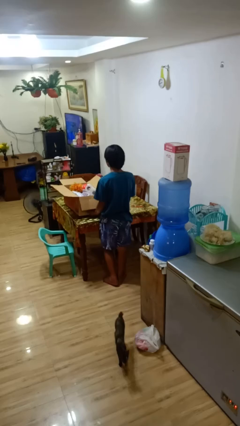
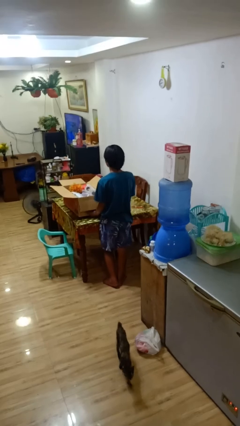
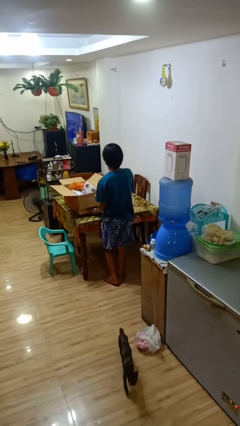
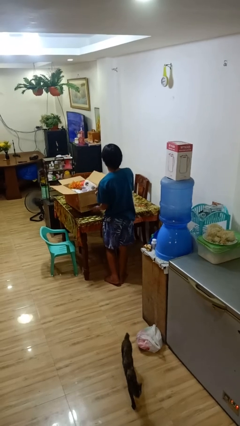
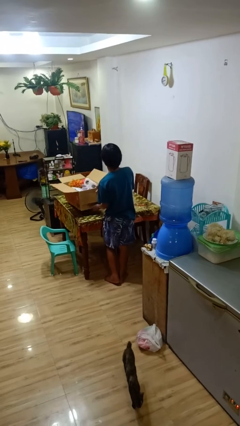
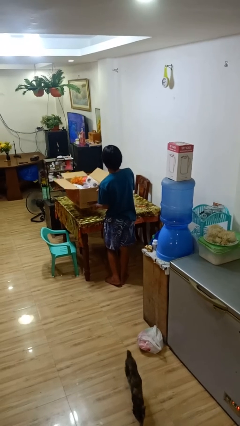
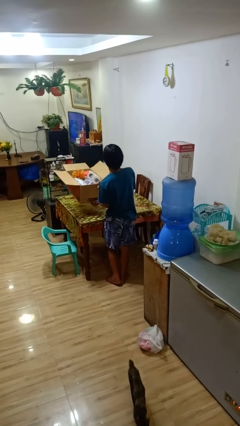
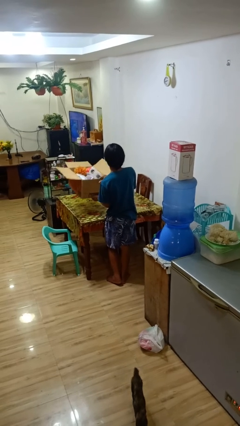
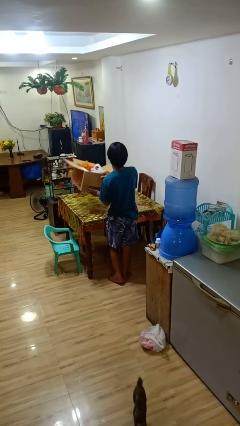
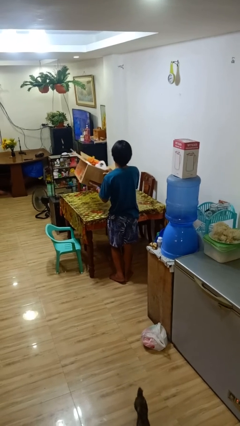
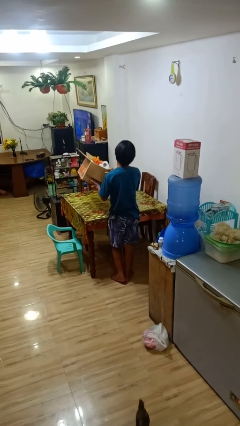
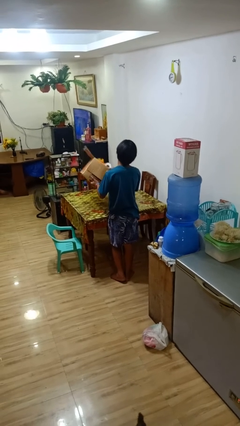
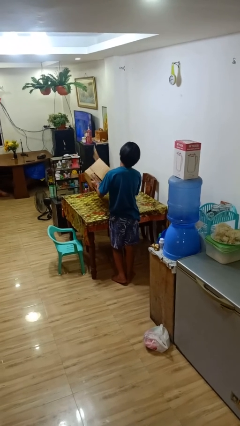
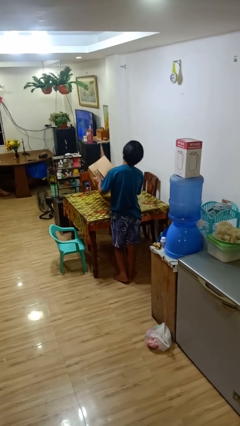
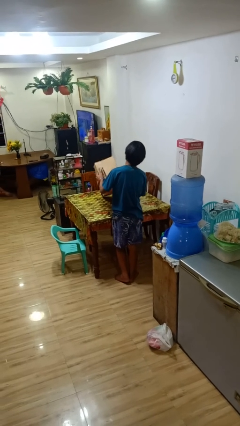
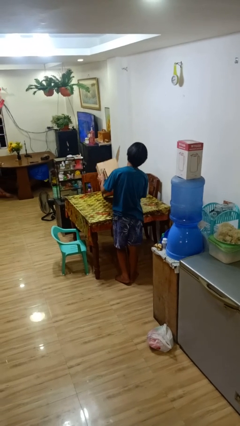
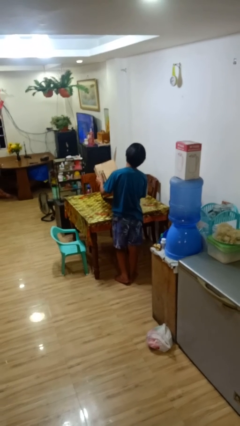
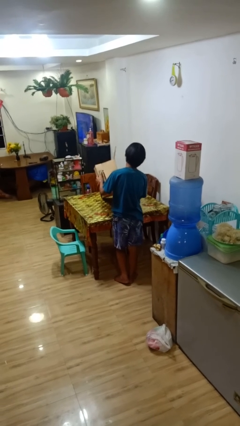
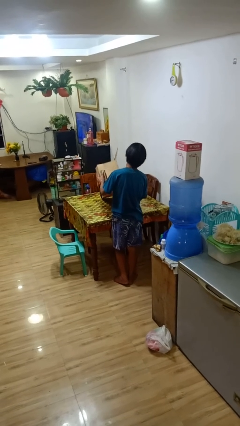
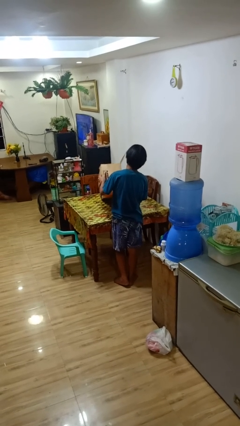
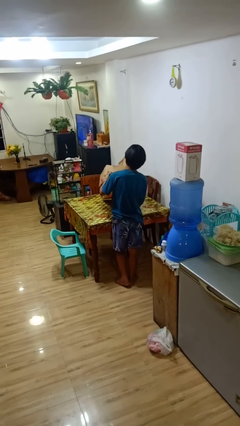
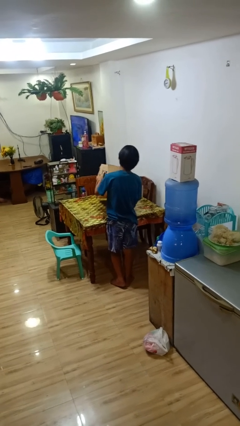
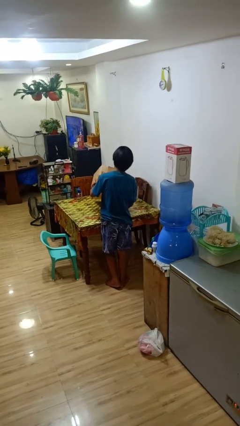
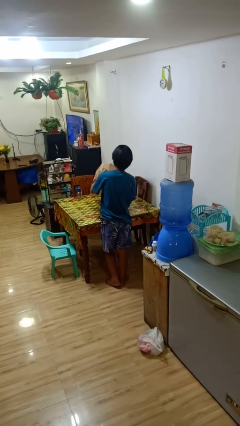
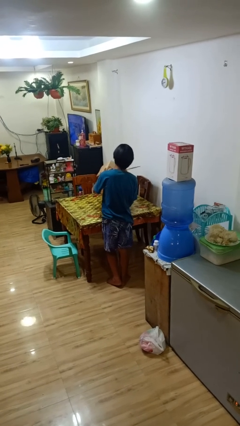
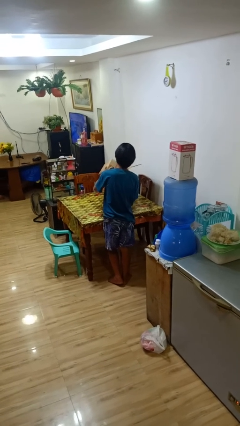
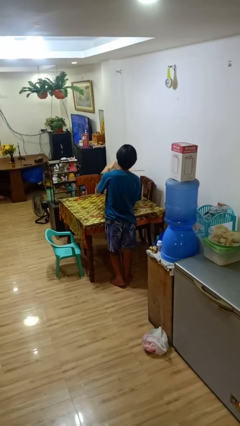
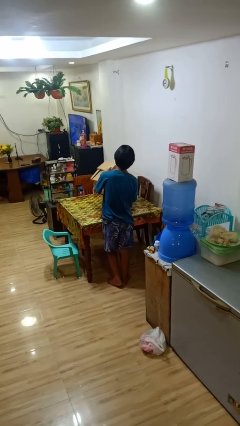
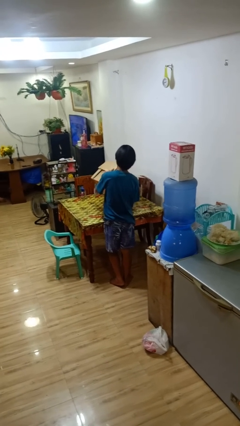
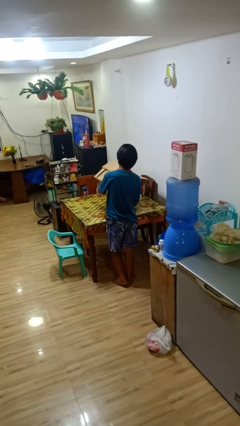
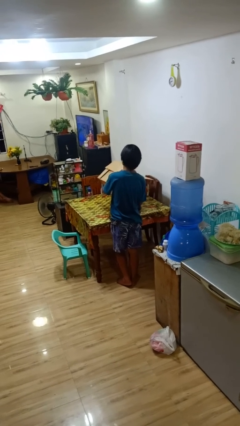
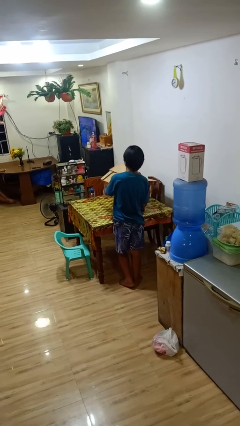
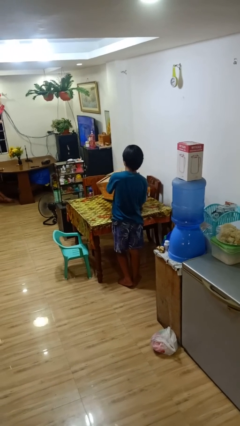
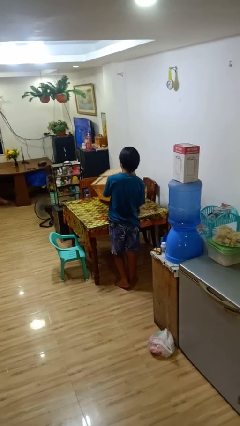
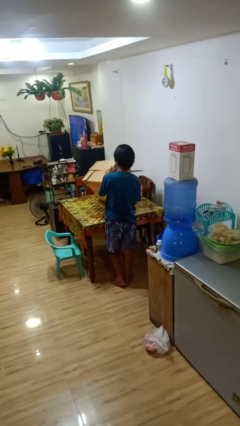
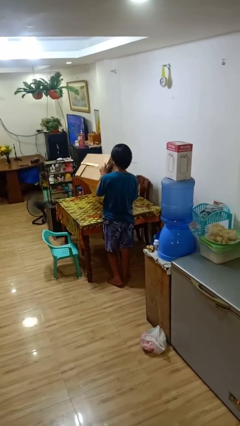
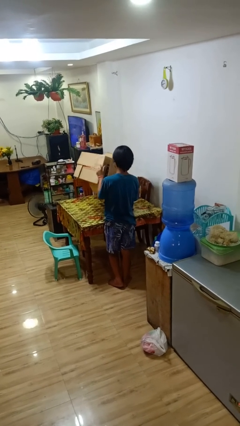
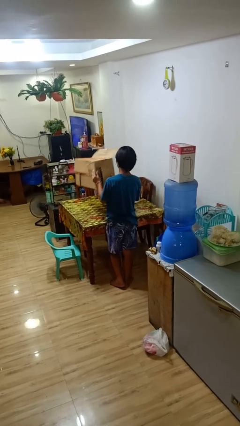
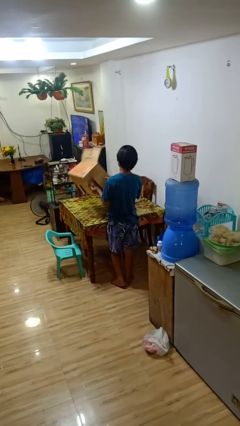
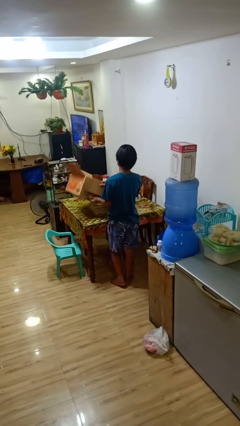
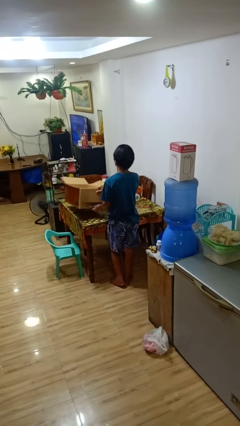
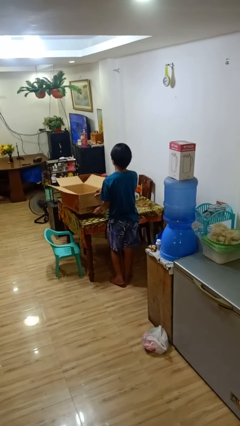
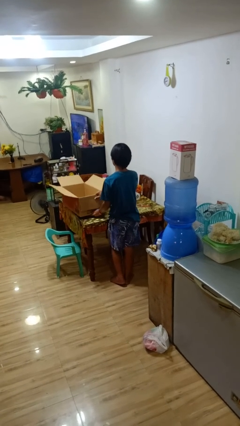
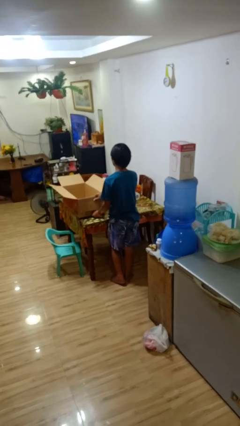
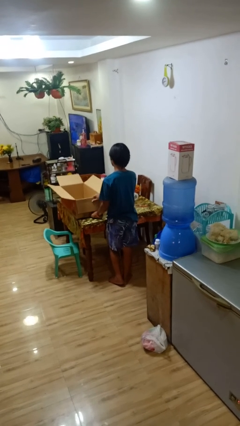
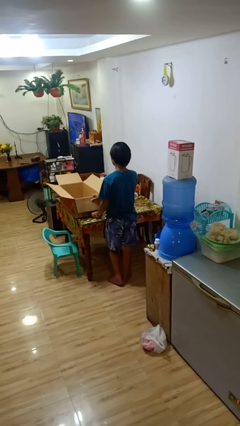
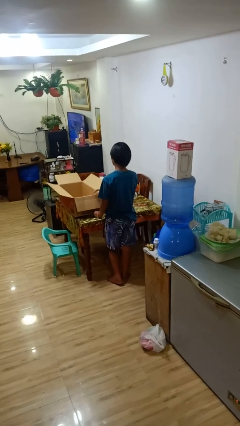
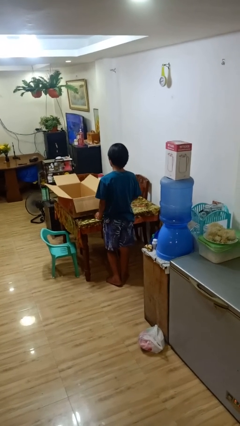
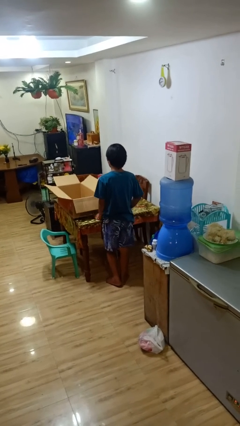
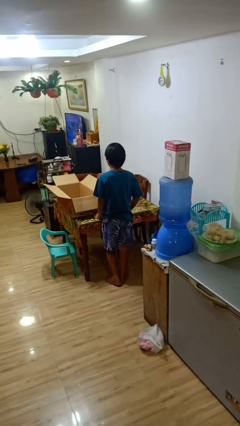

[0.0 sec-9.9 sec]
person unloads box onto table

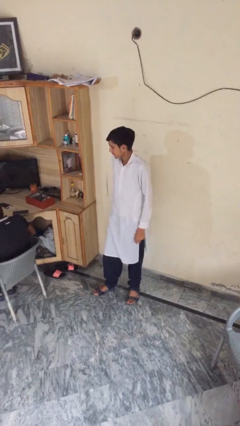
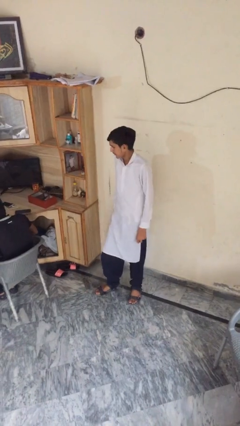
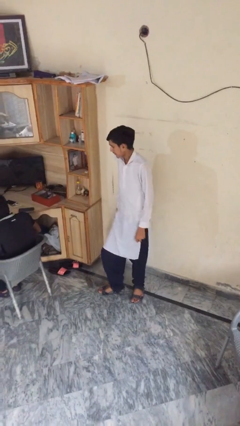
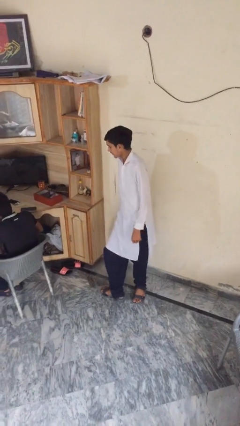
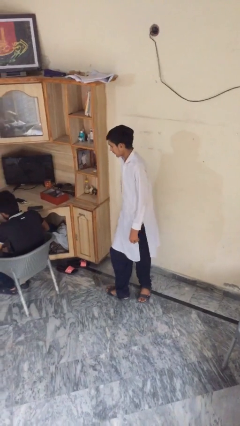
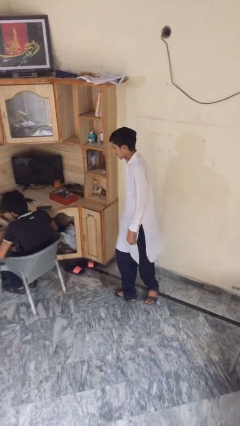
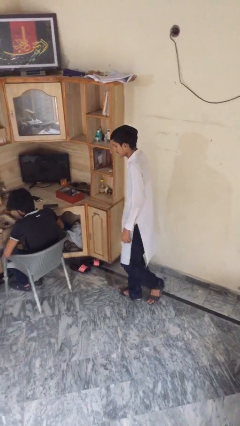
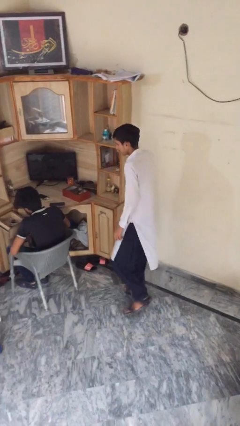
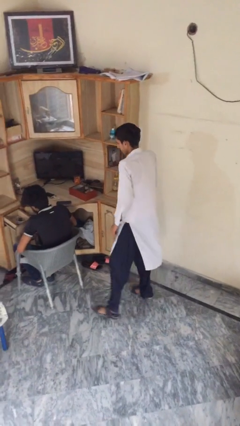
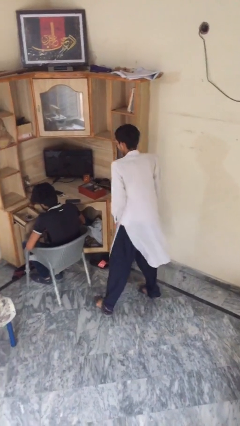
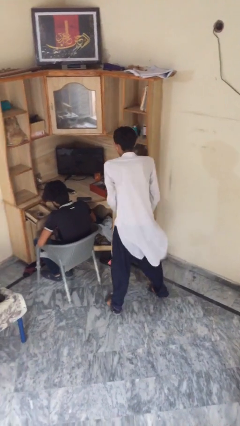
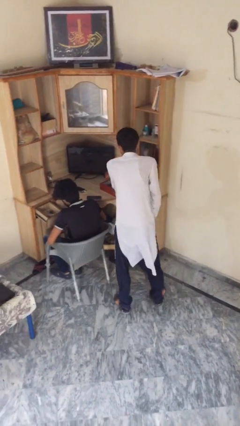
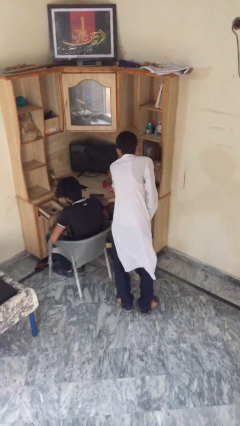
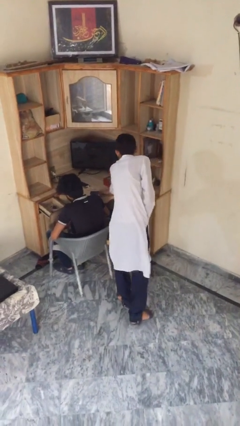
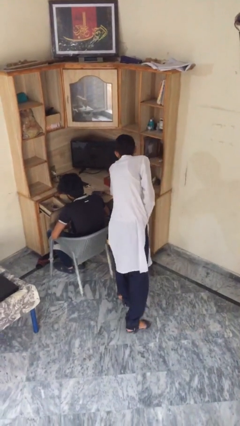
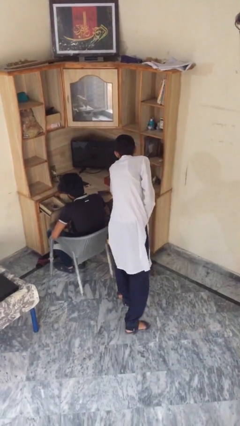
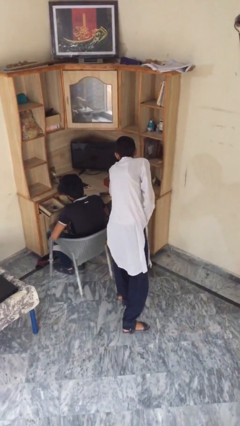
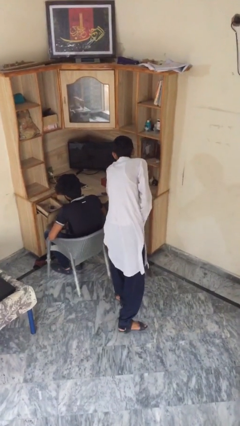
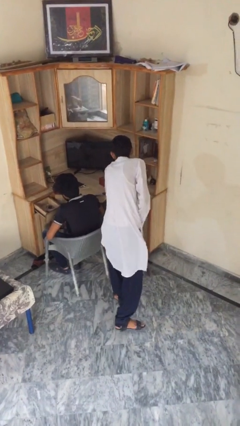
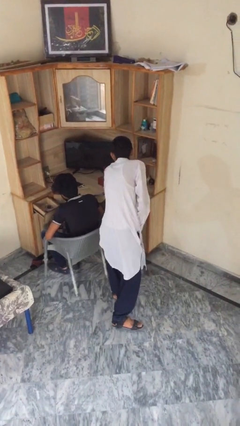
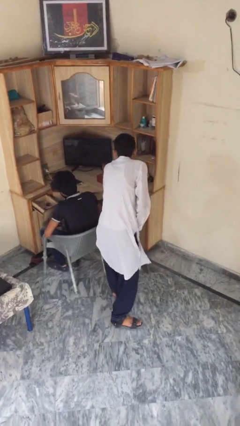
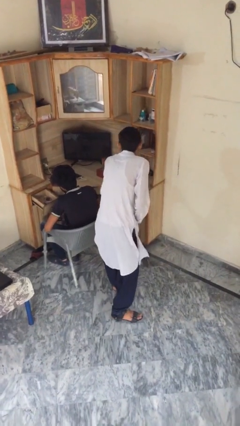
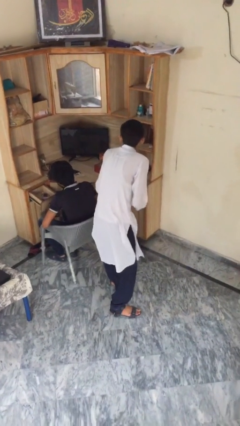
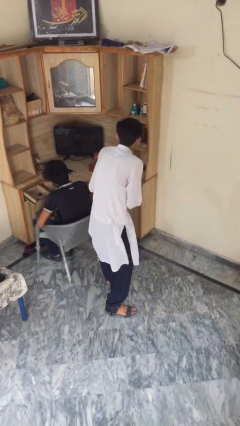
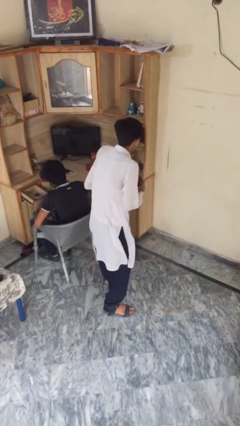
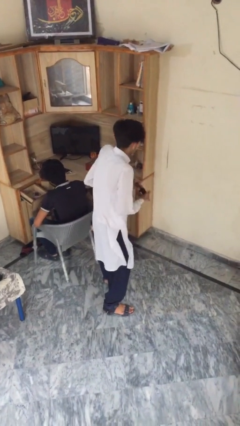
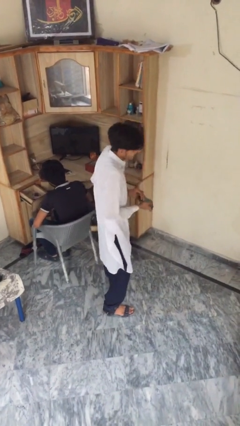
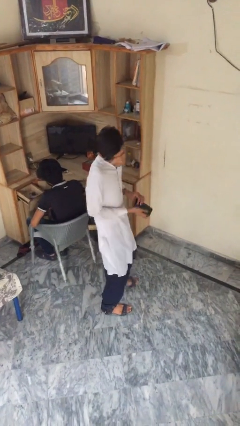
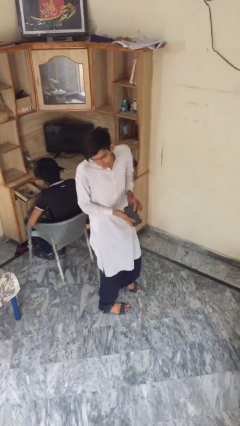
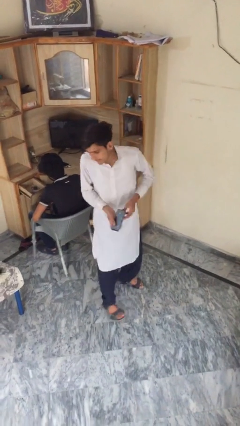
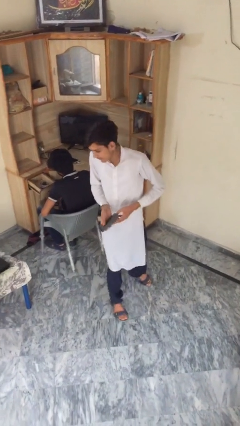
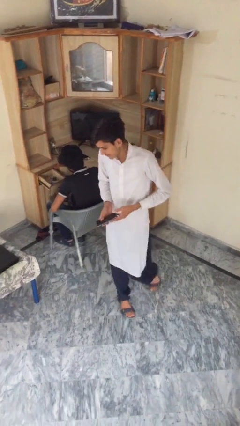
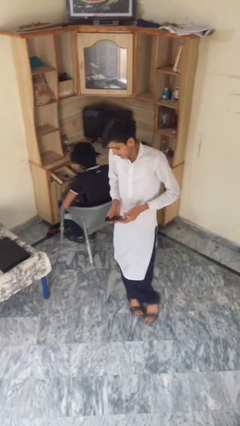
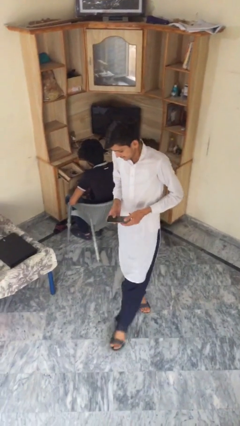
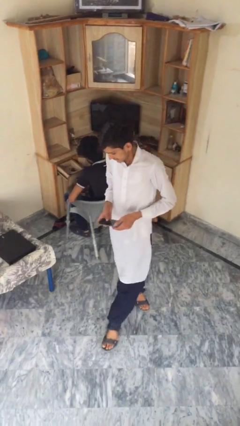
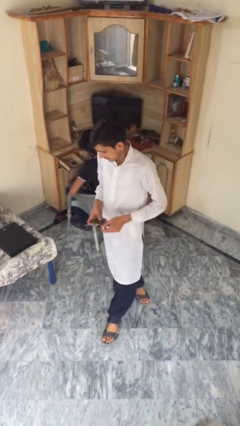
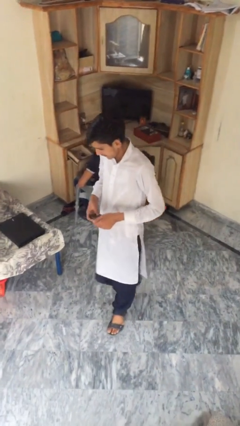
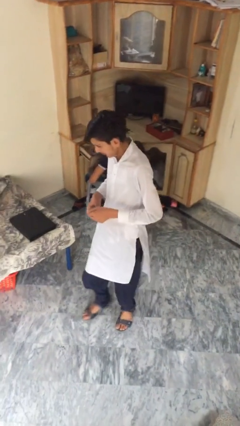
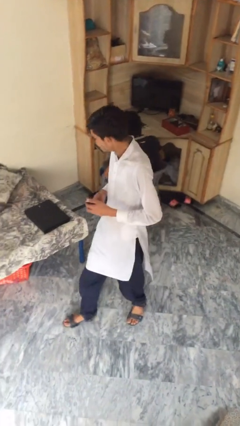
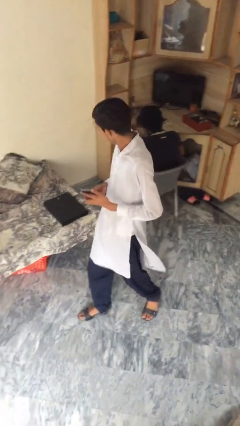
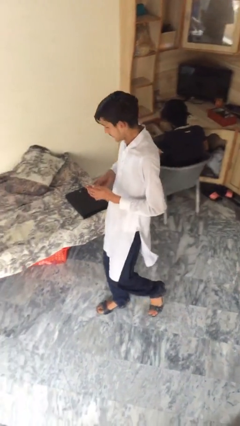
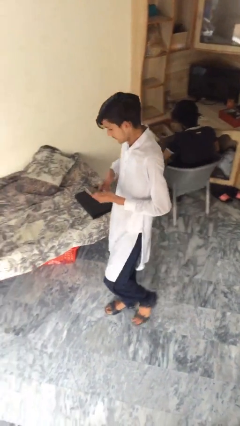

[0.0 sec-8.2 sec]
person steals object from person

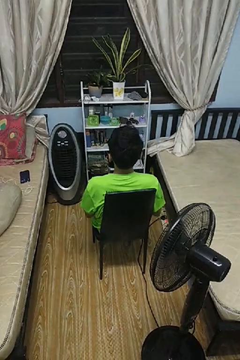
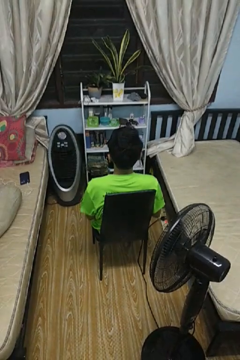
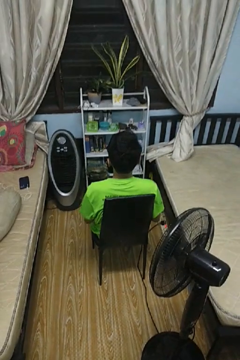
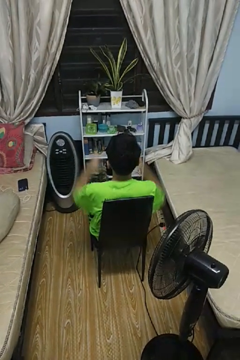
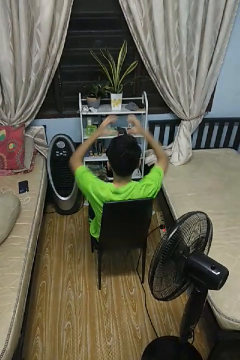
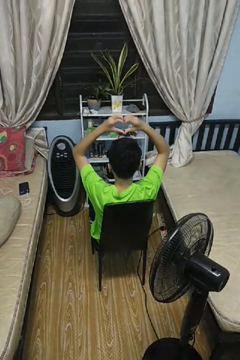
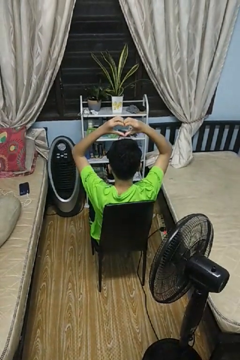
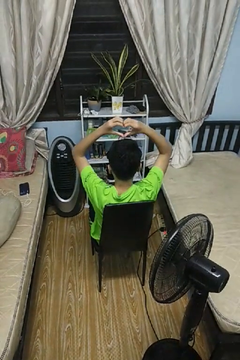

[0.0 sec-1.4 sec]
person gestures heart
